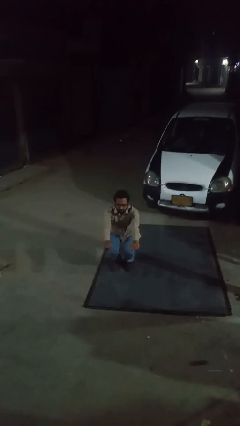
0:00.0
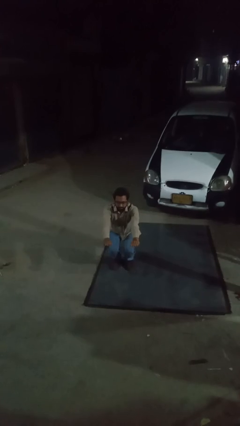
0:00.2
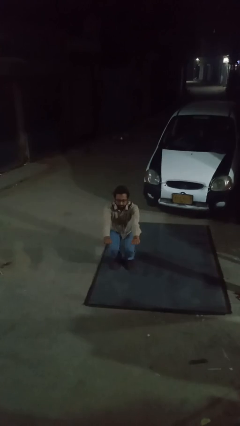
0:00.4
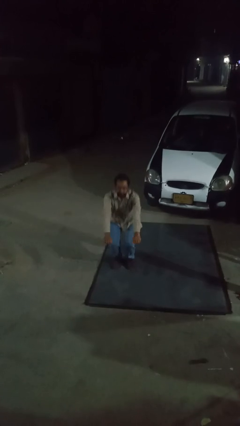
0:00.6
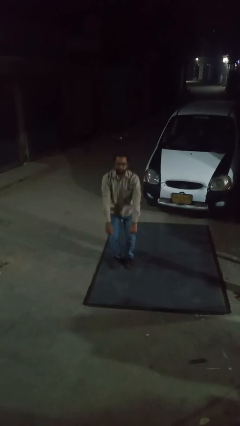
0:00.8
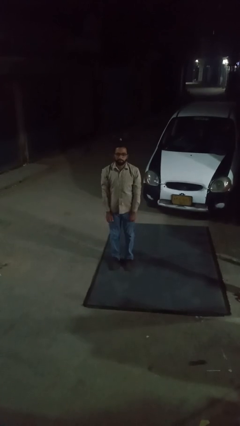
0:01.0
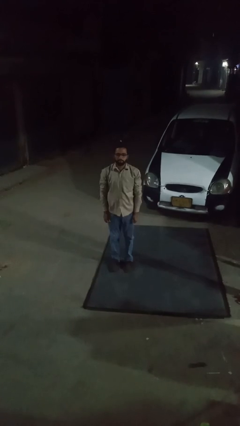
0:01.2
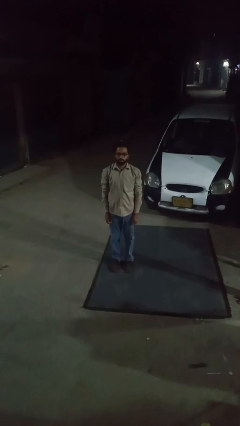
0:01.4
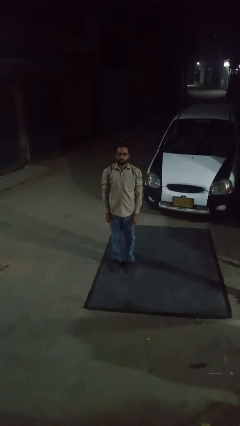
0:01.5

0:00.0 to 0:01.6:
person stands up

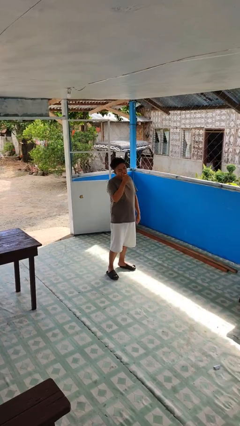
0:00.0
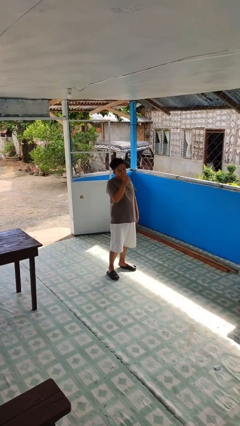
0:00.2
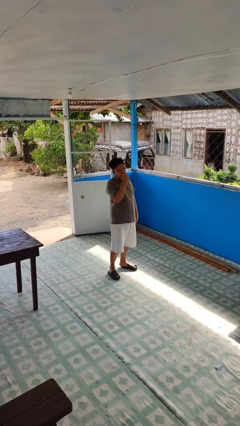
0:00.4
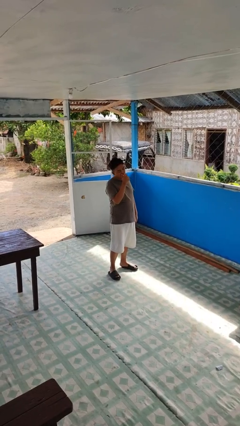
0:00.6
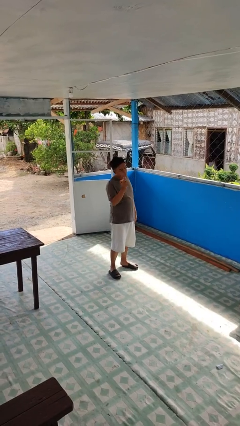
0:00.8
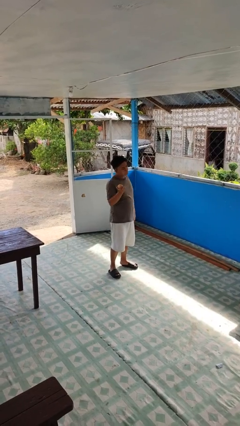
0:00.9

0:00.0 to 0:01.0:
person eats apple

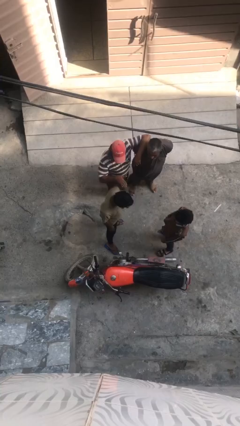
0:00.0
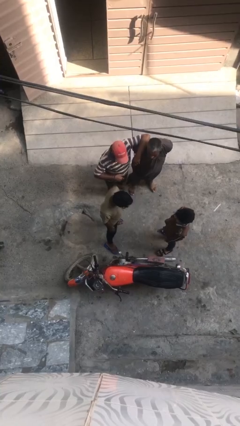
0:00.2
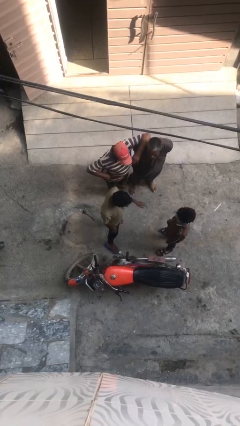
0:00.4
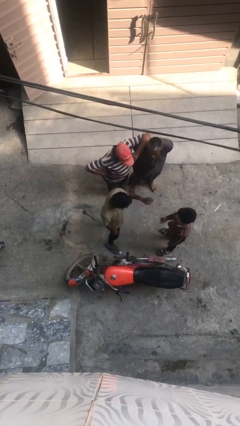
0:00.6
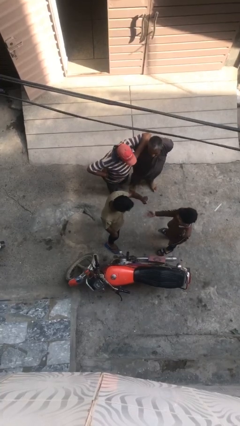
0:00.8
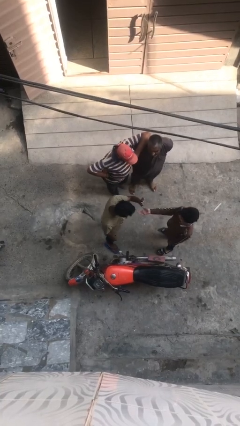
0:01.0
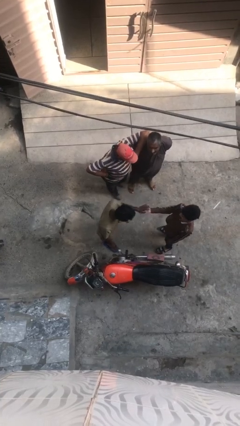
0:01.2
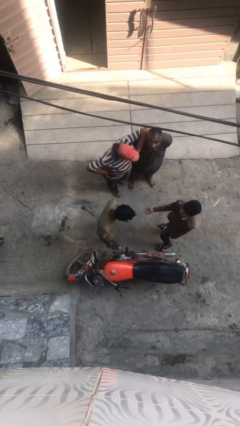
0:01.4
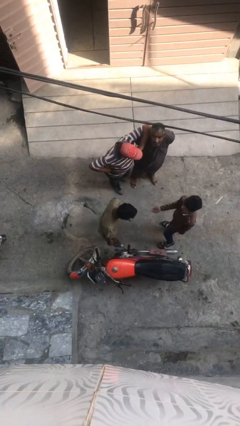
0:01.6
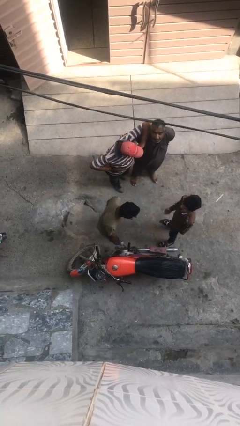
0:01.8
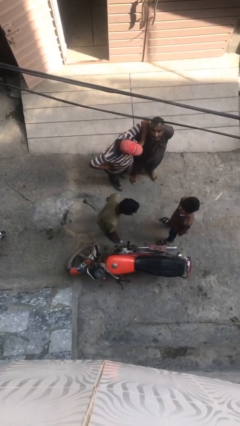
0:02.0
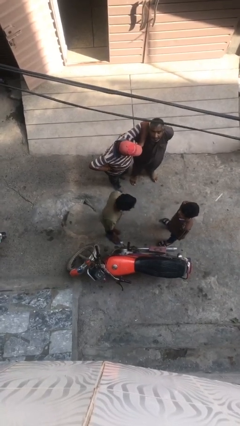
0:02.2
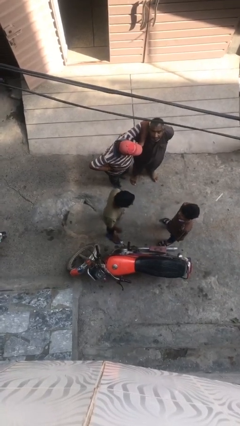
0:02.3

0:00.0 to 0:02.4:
person laughs with person

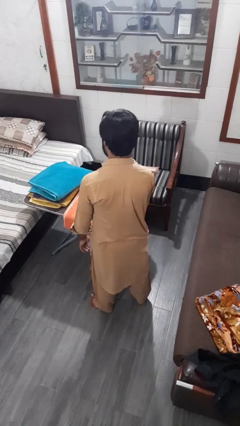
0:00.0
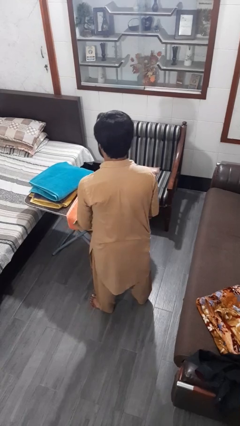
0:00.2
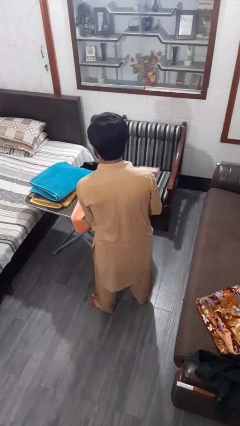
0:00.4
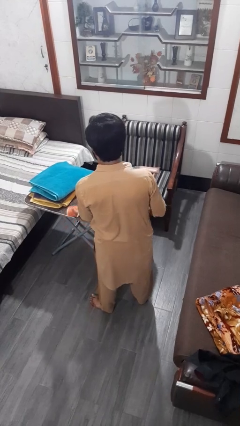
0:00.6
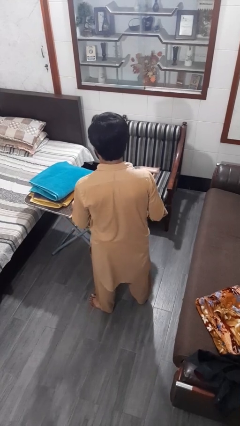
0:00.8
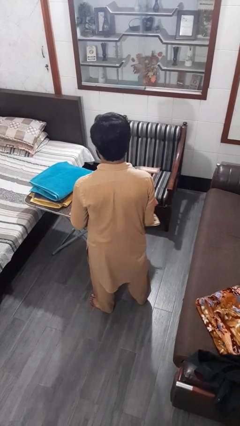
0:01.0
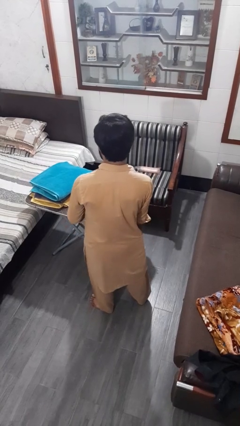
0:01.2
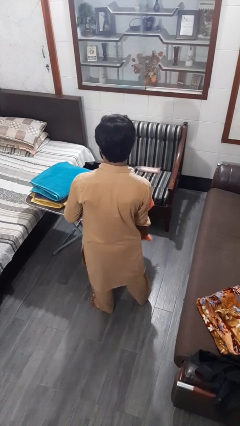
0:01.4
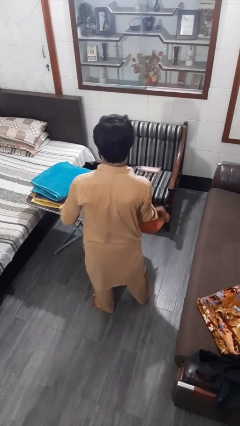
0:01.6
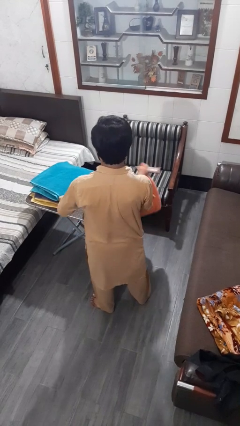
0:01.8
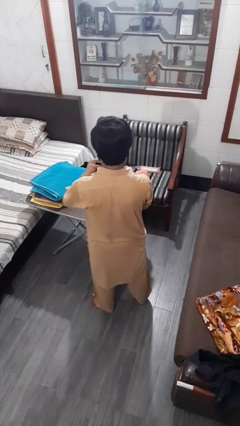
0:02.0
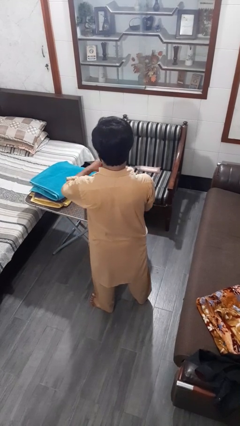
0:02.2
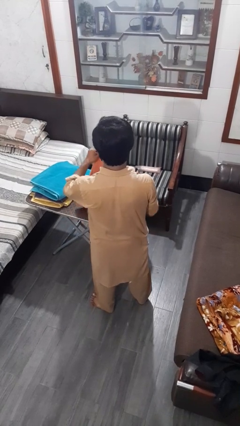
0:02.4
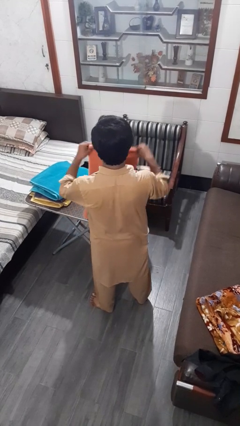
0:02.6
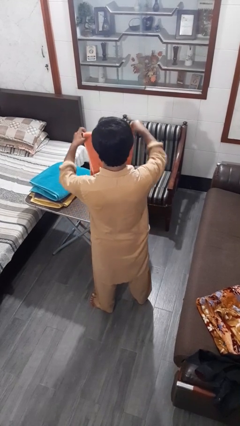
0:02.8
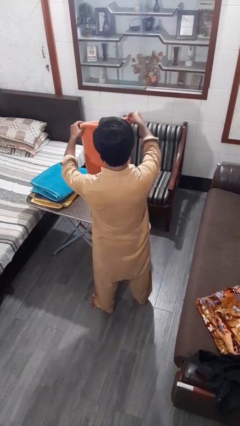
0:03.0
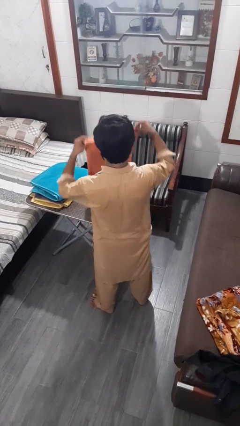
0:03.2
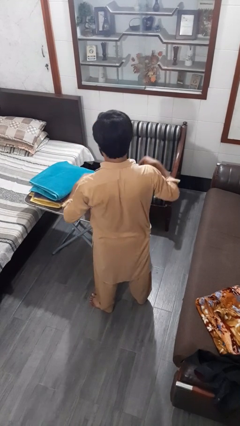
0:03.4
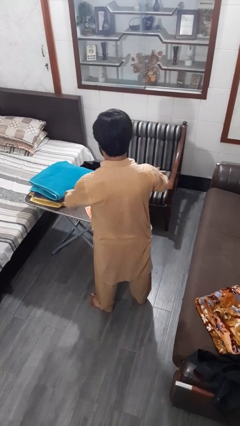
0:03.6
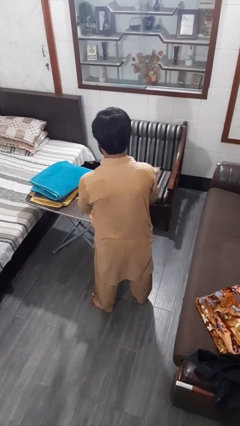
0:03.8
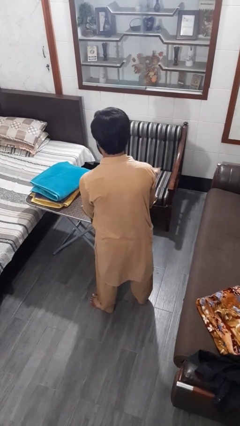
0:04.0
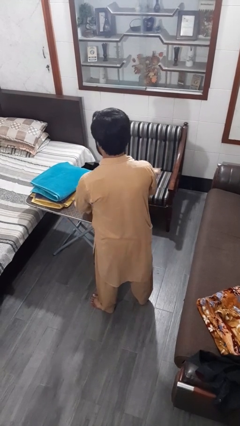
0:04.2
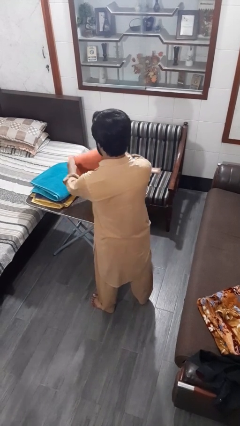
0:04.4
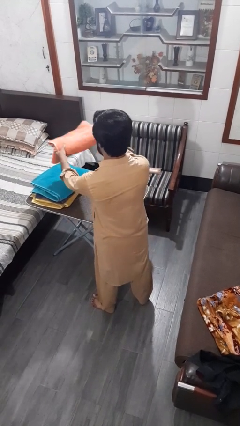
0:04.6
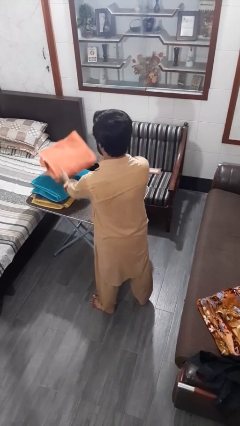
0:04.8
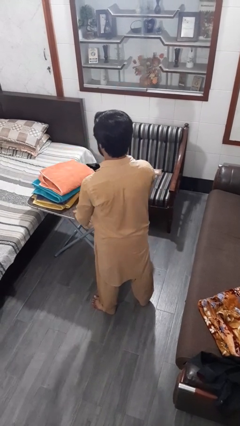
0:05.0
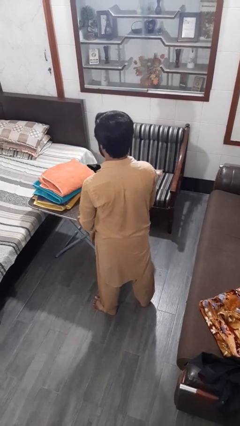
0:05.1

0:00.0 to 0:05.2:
person folds towel

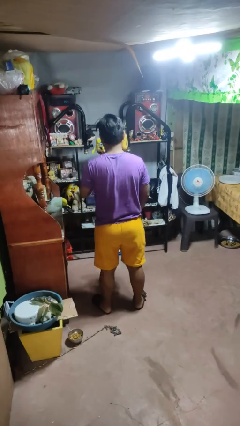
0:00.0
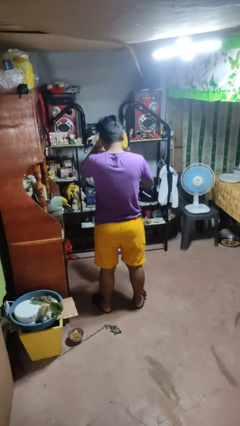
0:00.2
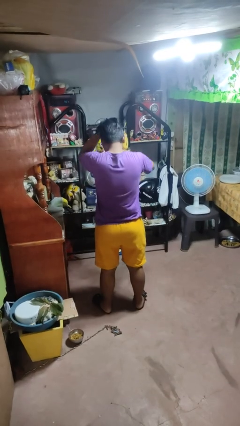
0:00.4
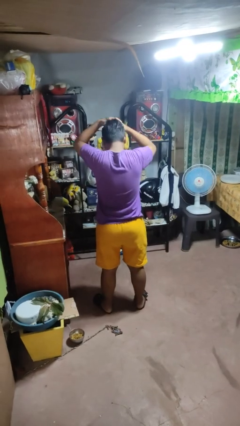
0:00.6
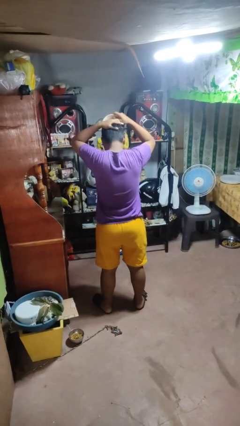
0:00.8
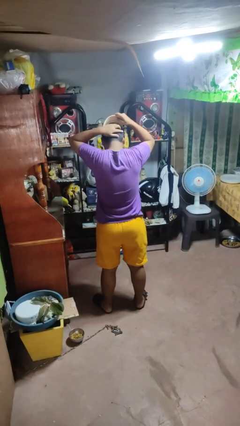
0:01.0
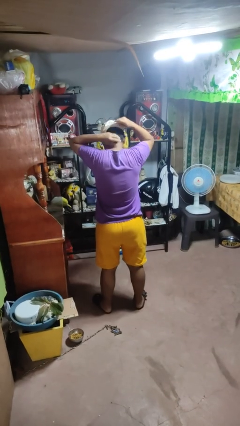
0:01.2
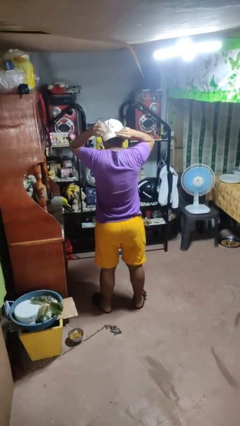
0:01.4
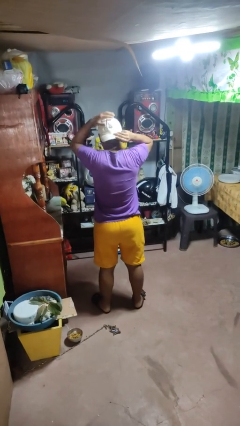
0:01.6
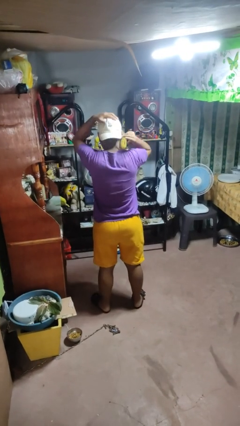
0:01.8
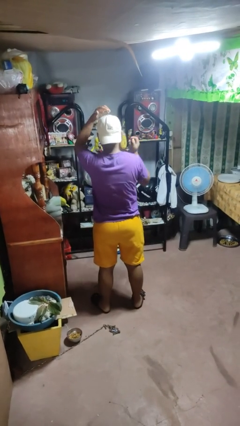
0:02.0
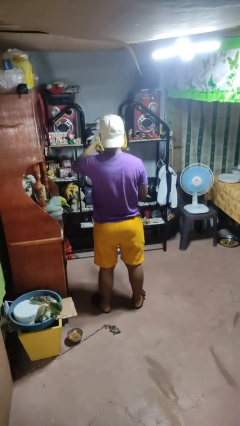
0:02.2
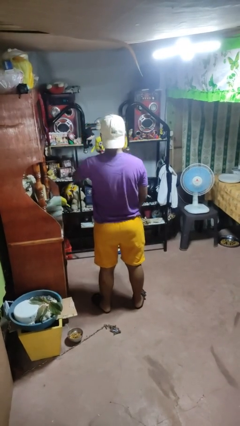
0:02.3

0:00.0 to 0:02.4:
person puts on hat

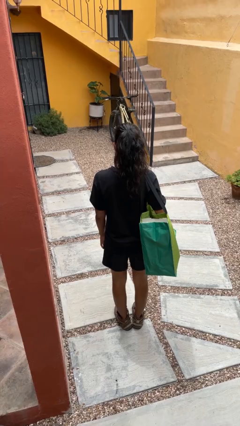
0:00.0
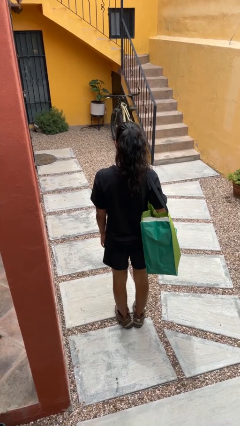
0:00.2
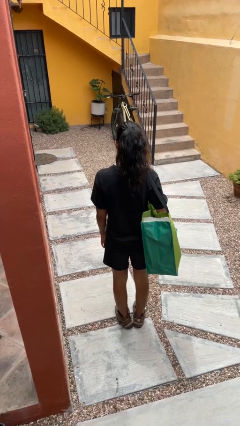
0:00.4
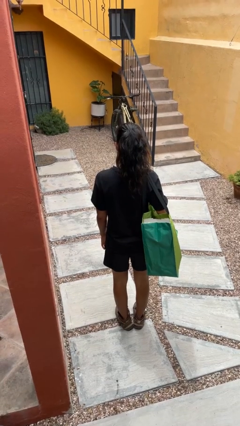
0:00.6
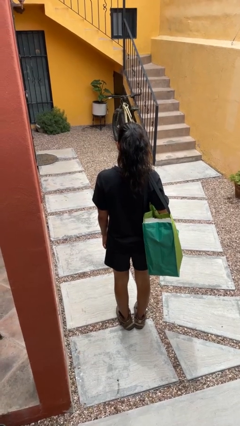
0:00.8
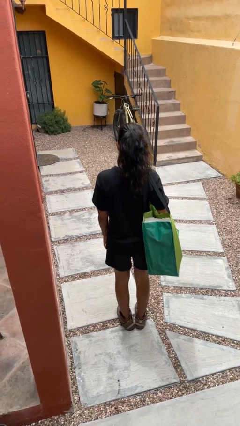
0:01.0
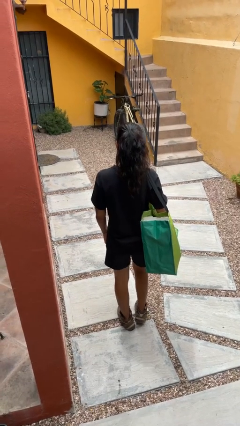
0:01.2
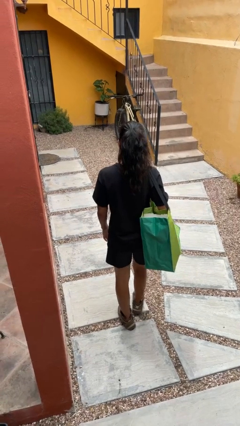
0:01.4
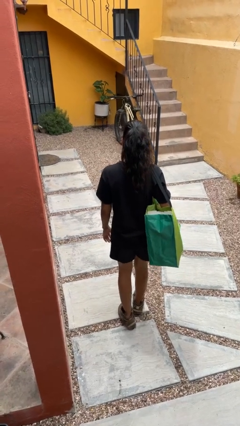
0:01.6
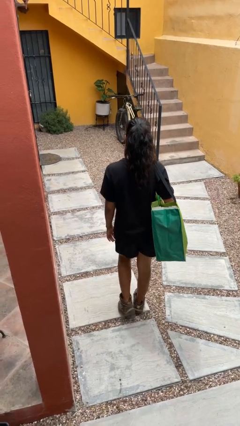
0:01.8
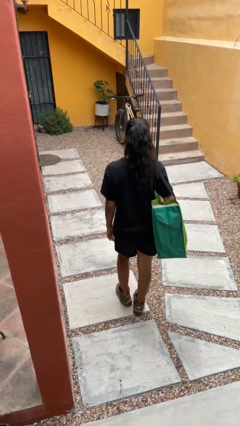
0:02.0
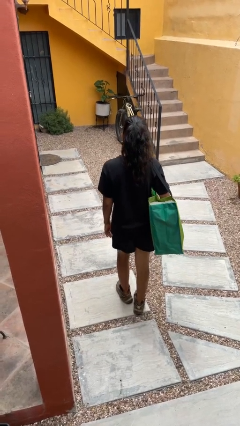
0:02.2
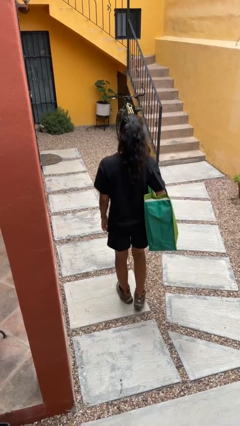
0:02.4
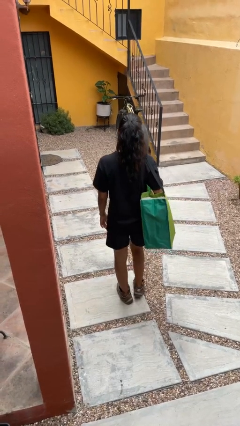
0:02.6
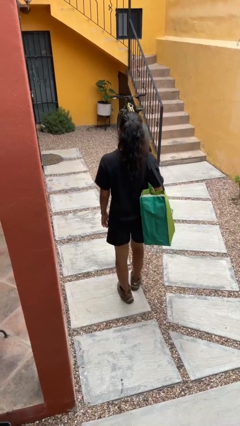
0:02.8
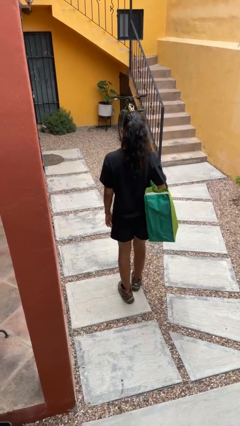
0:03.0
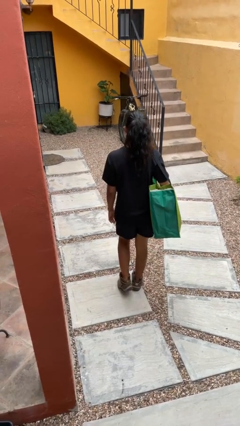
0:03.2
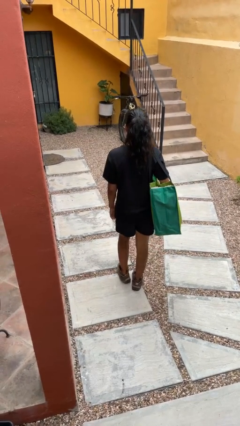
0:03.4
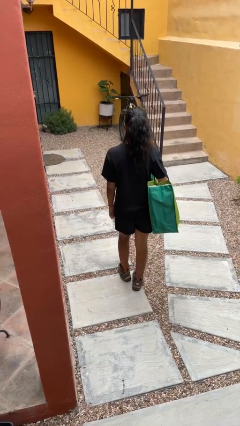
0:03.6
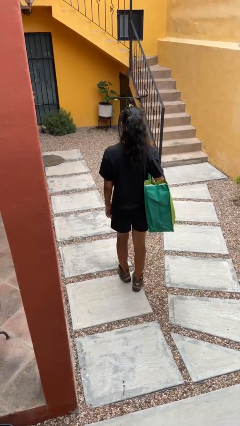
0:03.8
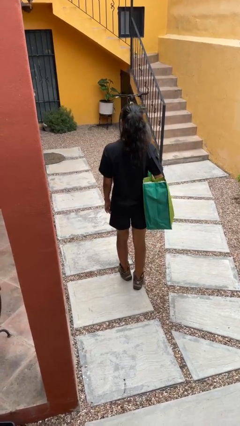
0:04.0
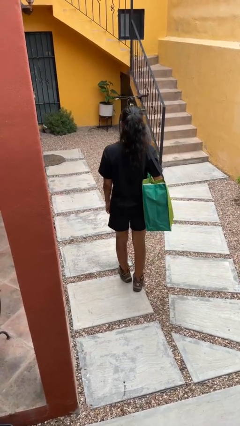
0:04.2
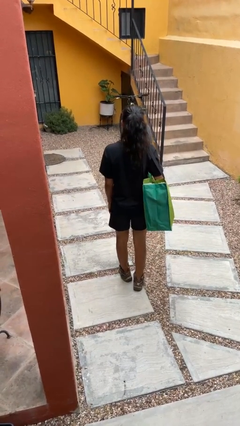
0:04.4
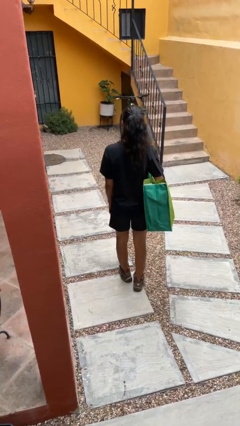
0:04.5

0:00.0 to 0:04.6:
person carries groceries

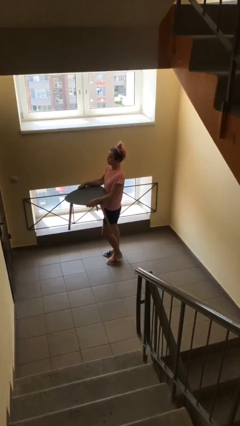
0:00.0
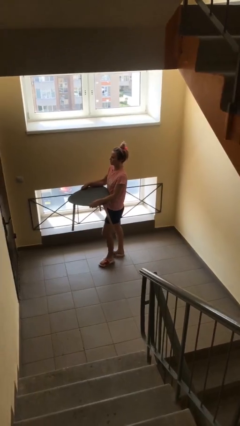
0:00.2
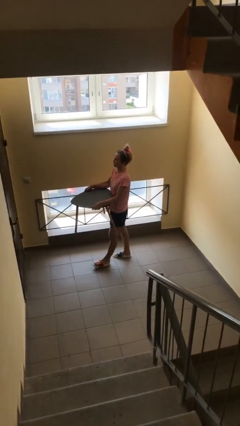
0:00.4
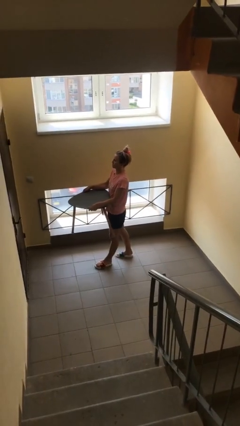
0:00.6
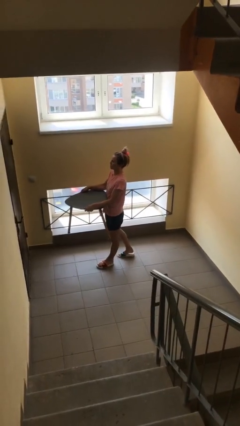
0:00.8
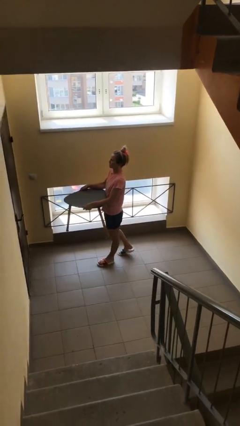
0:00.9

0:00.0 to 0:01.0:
person carries furniture
